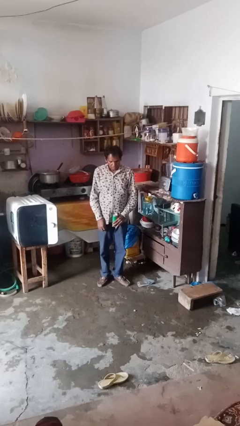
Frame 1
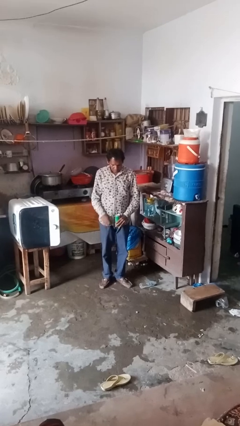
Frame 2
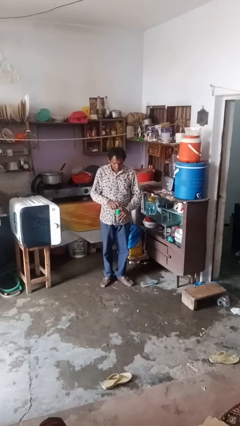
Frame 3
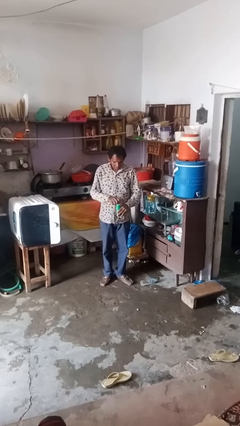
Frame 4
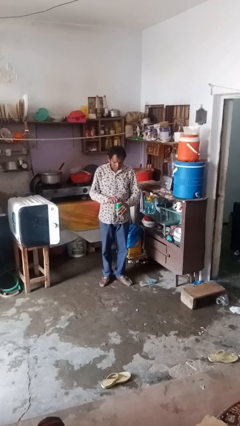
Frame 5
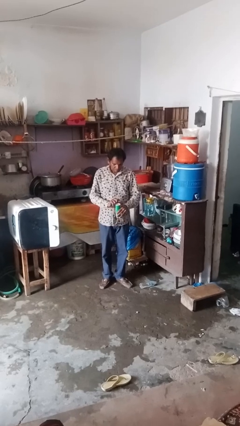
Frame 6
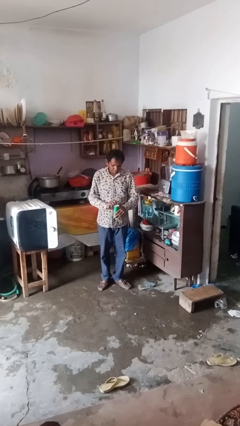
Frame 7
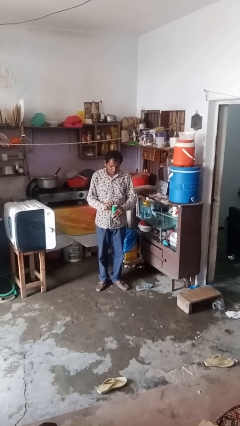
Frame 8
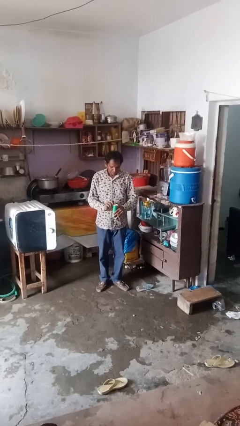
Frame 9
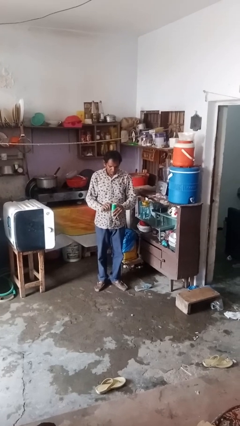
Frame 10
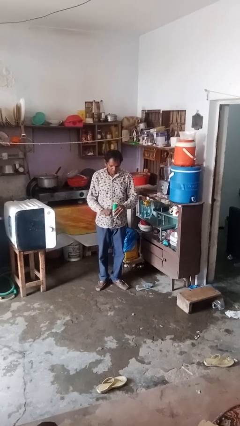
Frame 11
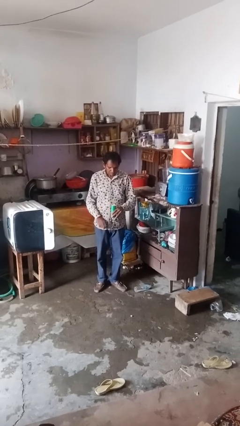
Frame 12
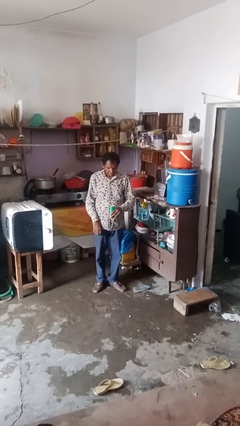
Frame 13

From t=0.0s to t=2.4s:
person opens beverage can

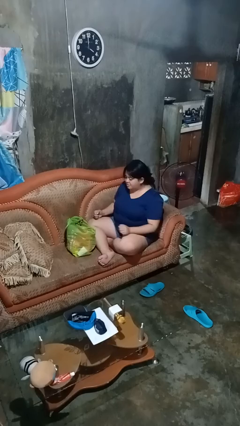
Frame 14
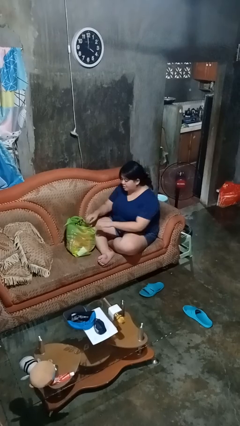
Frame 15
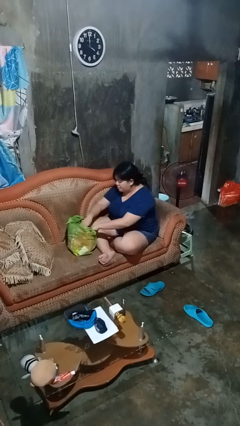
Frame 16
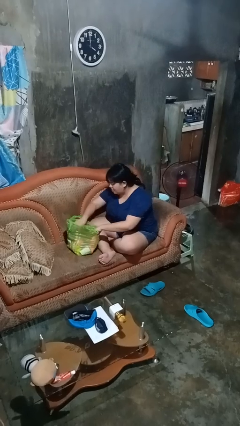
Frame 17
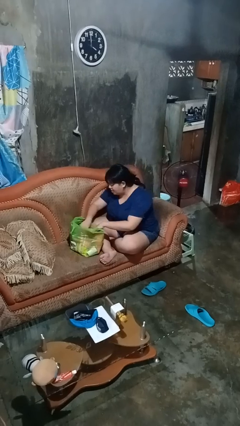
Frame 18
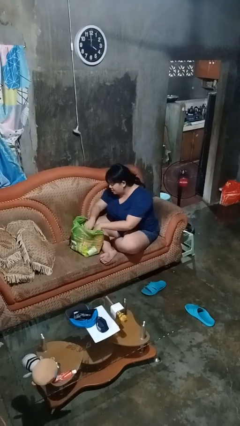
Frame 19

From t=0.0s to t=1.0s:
person searches in bag

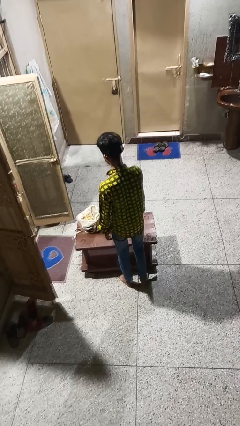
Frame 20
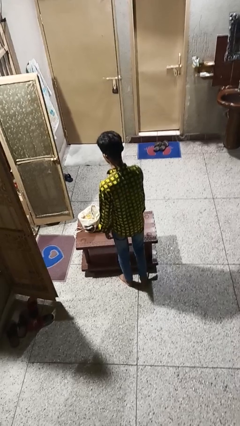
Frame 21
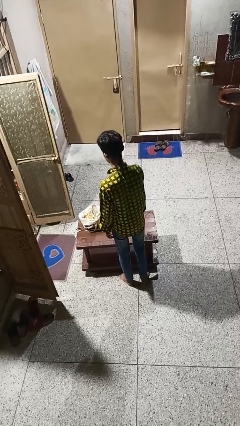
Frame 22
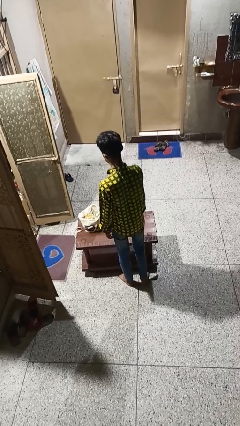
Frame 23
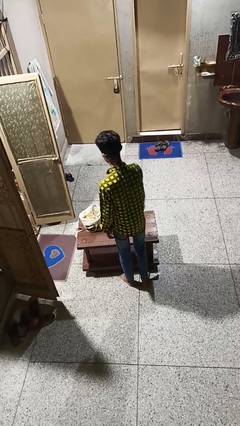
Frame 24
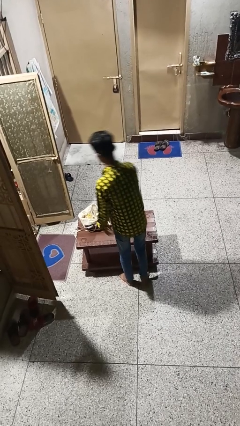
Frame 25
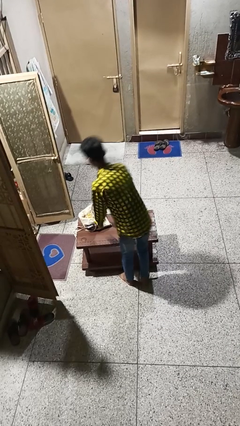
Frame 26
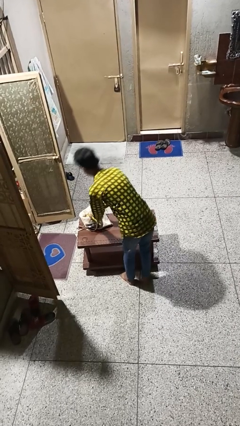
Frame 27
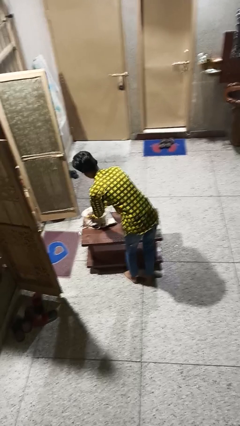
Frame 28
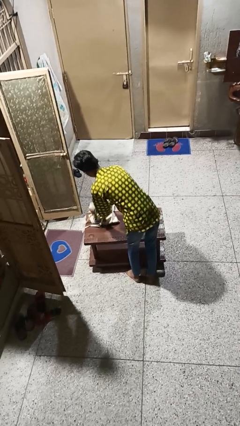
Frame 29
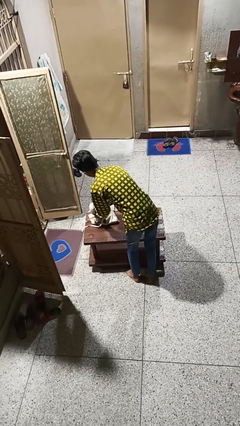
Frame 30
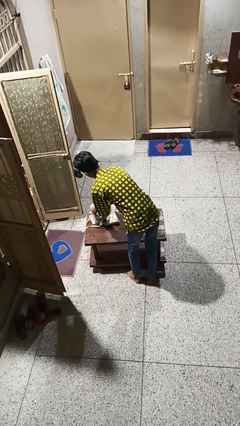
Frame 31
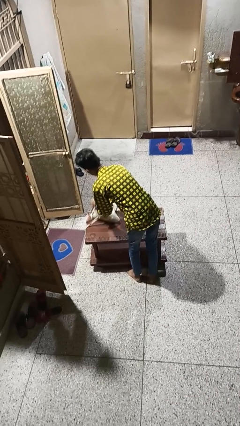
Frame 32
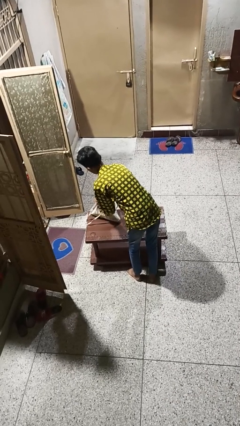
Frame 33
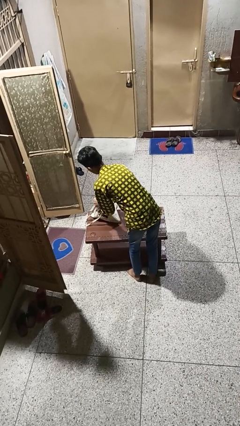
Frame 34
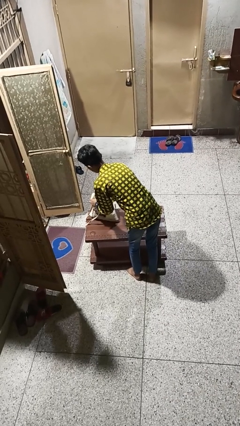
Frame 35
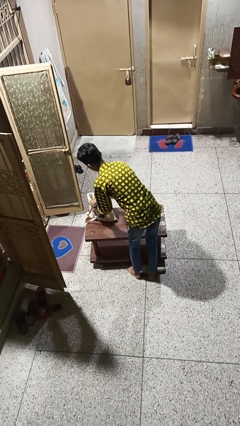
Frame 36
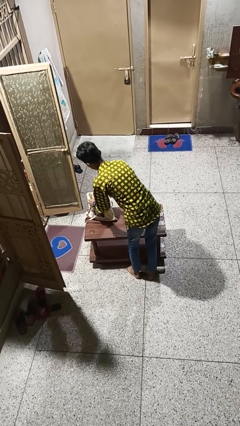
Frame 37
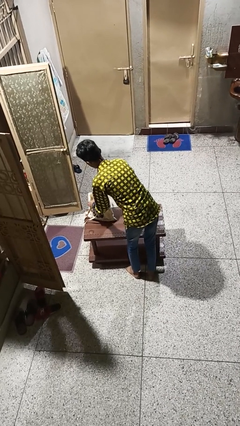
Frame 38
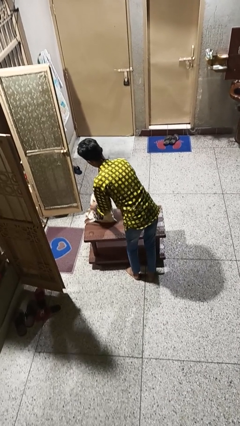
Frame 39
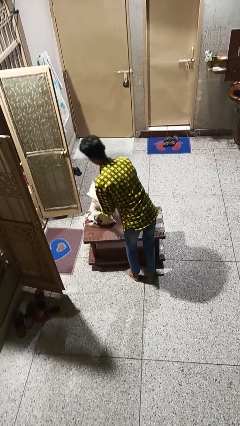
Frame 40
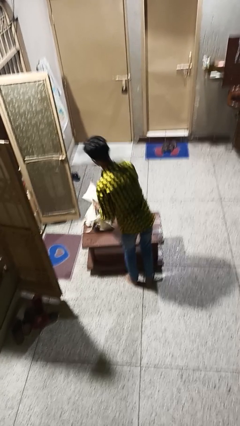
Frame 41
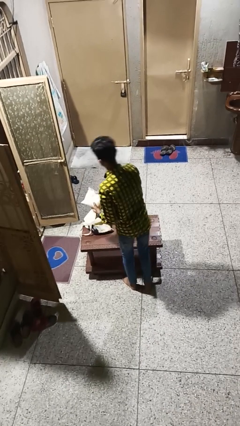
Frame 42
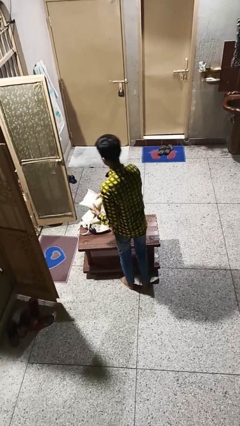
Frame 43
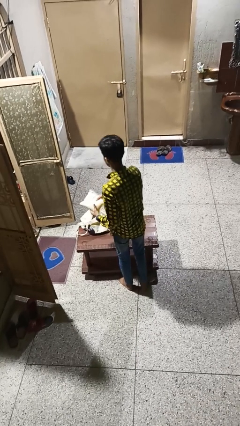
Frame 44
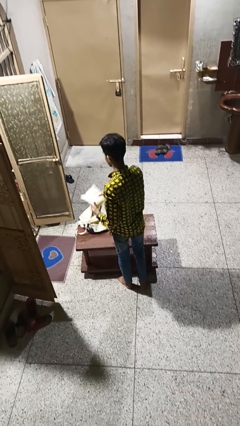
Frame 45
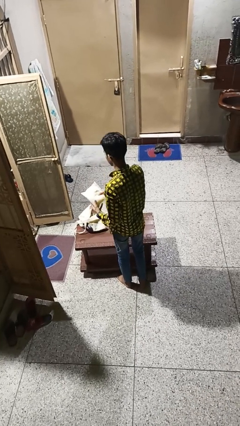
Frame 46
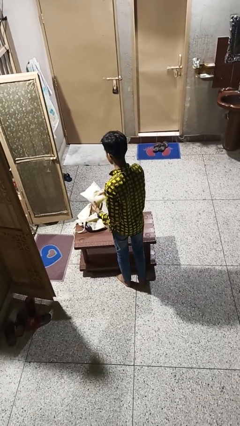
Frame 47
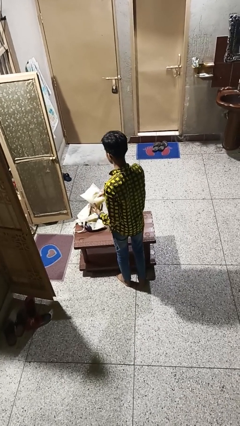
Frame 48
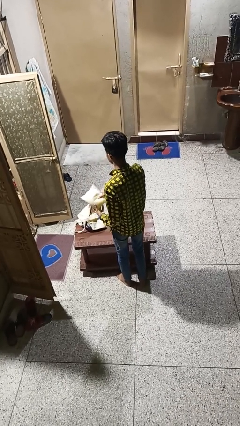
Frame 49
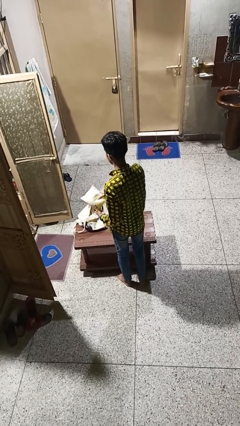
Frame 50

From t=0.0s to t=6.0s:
person takes object from bag

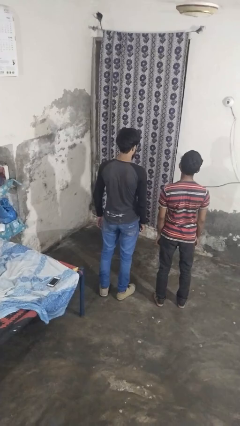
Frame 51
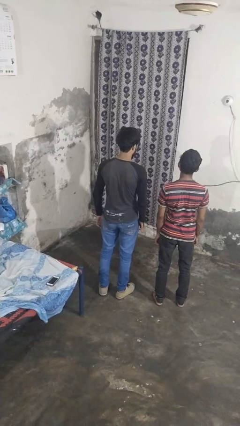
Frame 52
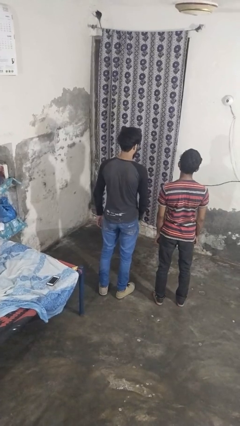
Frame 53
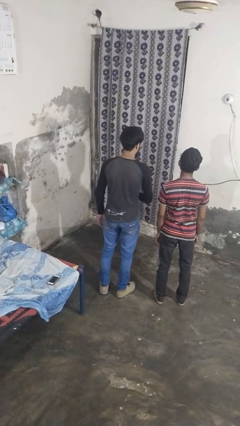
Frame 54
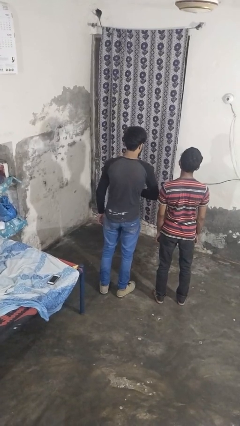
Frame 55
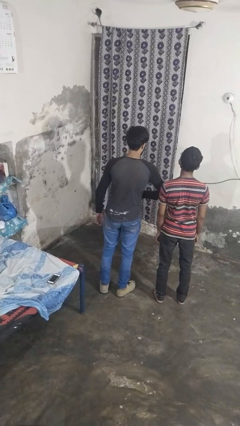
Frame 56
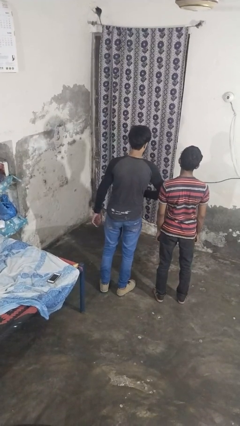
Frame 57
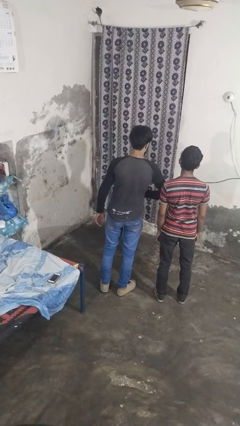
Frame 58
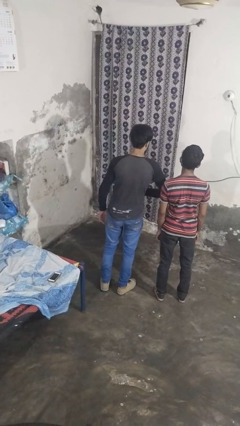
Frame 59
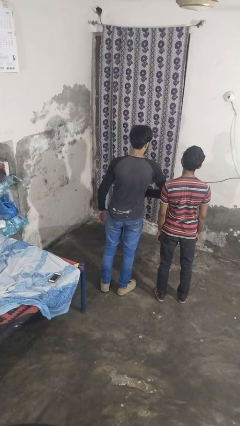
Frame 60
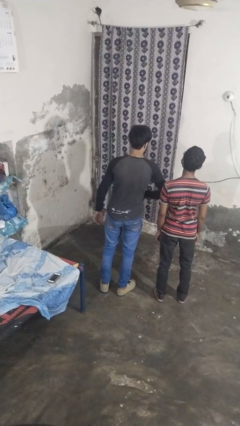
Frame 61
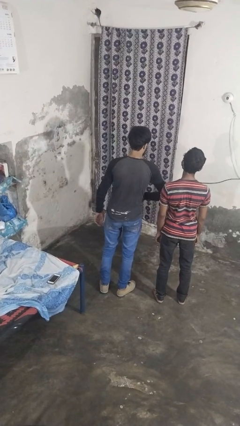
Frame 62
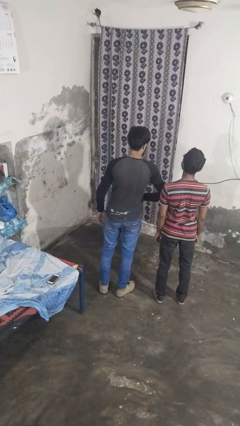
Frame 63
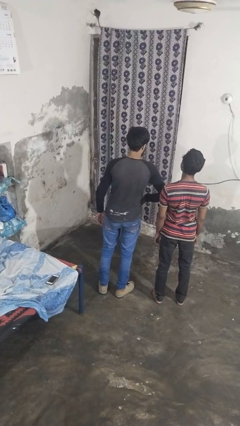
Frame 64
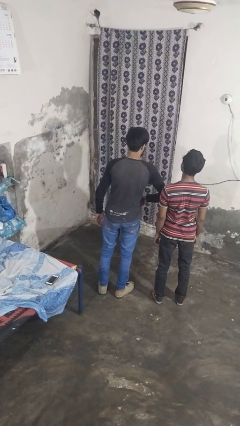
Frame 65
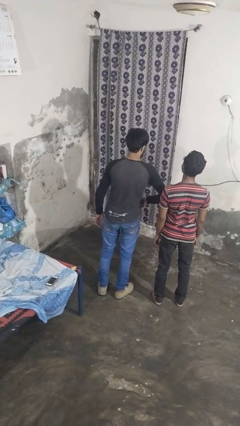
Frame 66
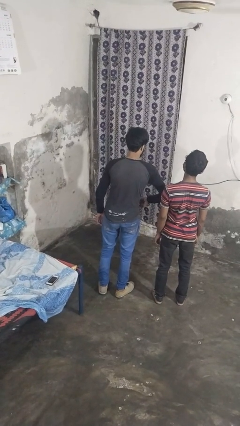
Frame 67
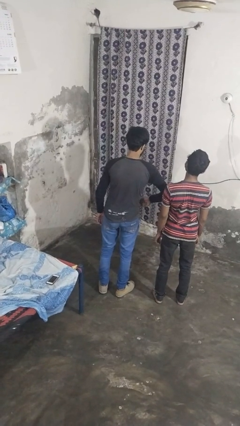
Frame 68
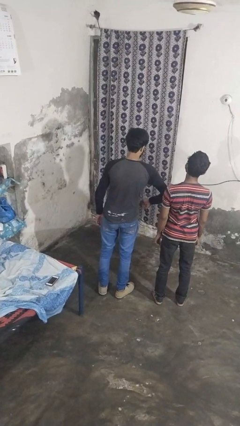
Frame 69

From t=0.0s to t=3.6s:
person nudges person with elbow

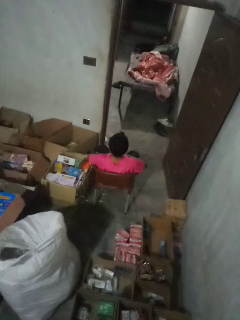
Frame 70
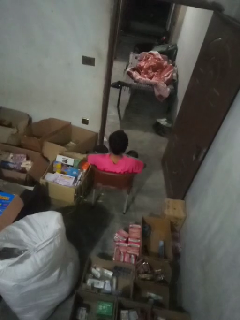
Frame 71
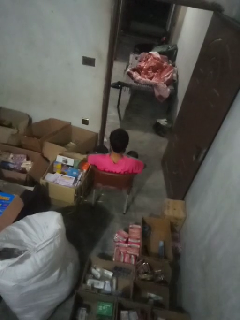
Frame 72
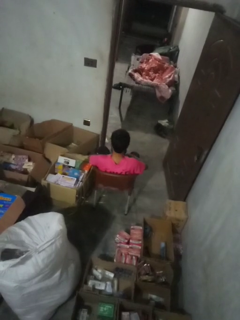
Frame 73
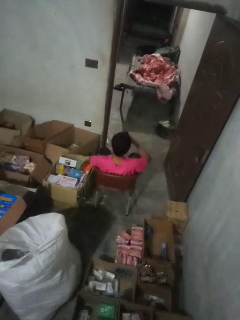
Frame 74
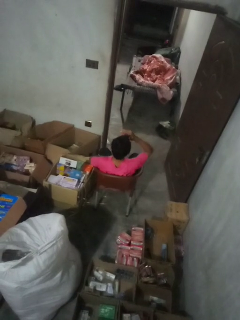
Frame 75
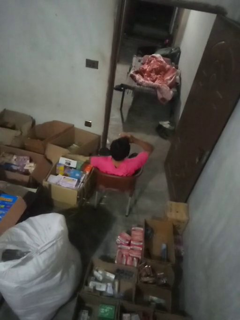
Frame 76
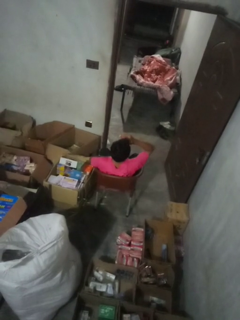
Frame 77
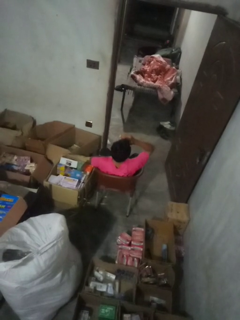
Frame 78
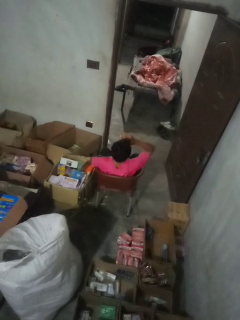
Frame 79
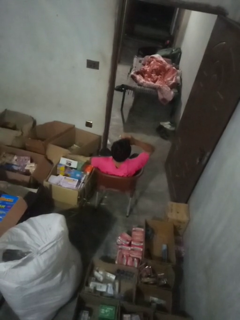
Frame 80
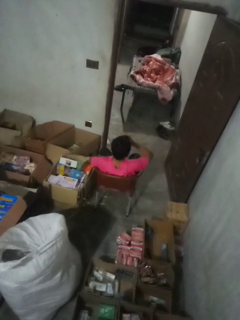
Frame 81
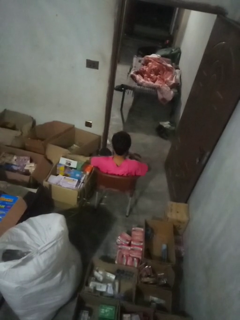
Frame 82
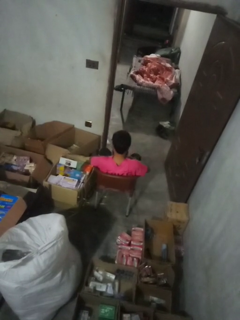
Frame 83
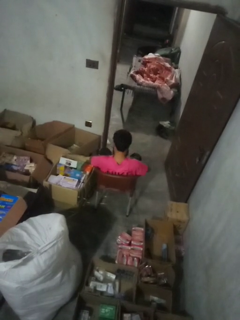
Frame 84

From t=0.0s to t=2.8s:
person shades eyes

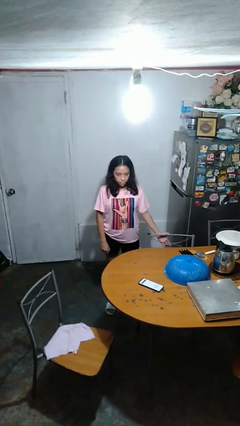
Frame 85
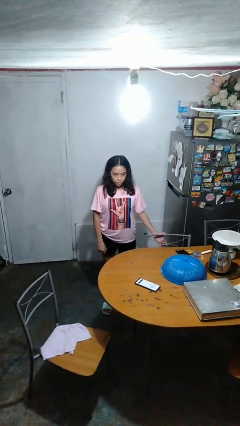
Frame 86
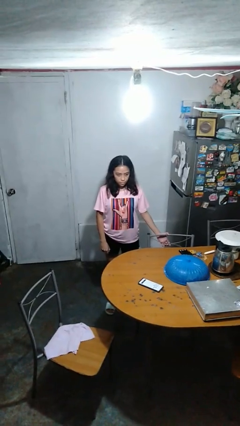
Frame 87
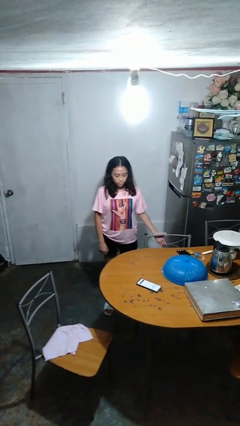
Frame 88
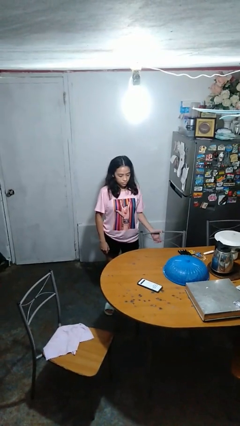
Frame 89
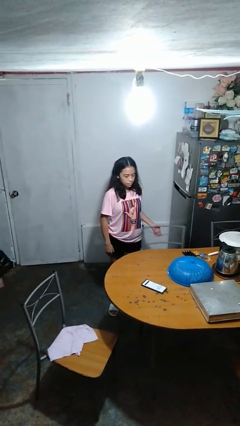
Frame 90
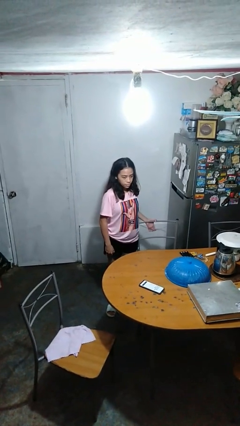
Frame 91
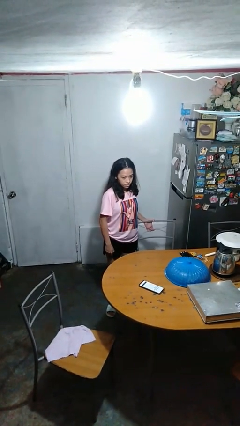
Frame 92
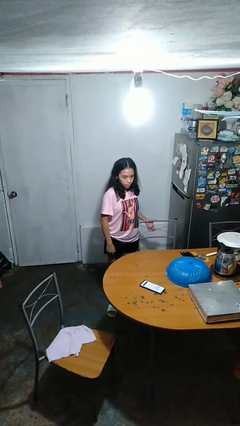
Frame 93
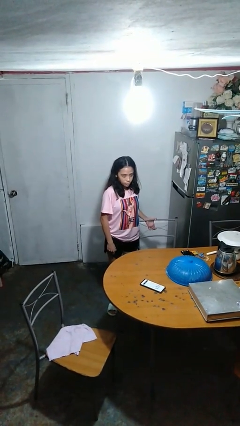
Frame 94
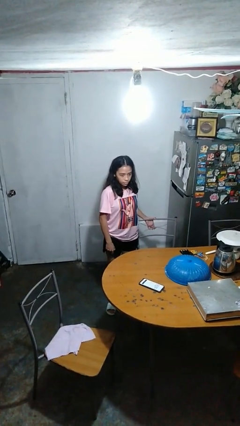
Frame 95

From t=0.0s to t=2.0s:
person pulls out chair

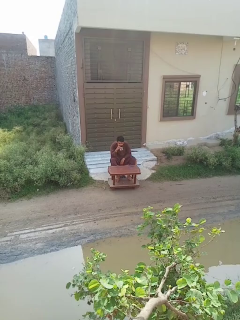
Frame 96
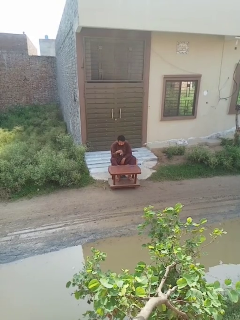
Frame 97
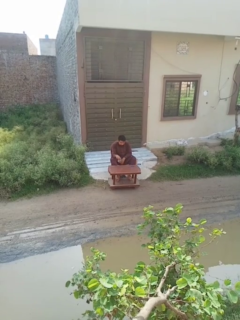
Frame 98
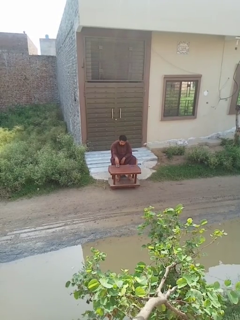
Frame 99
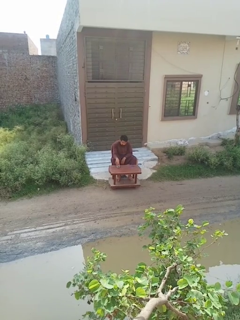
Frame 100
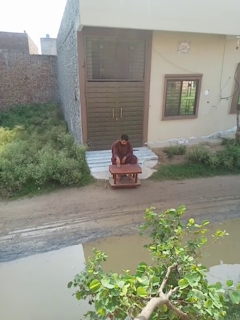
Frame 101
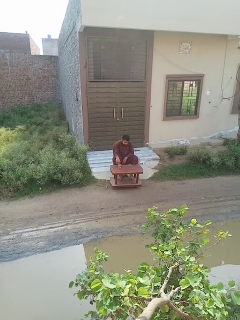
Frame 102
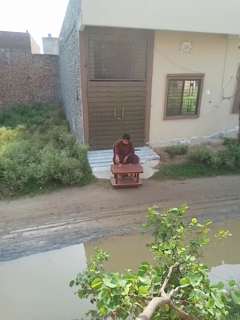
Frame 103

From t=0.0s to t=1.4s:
person puts down object on table
